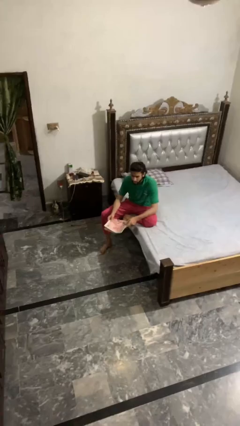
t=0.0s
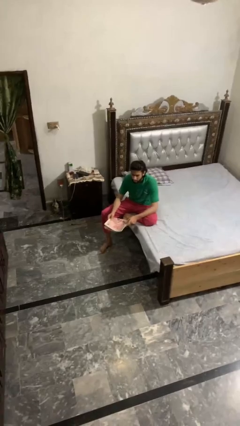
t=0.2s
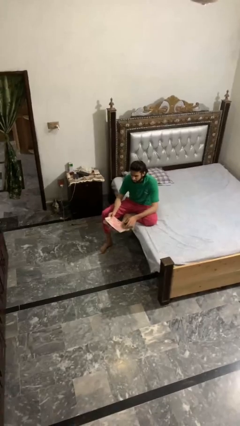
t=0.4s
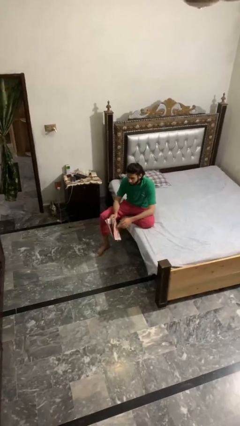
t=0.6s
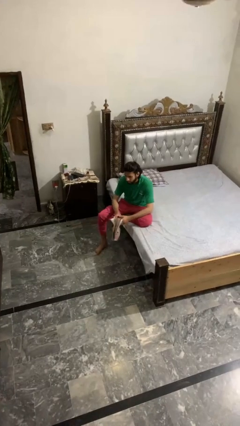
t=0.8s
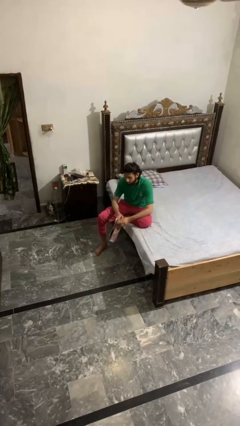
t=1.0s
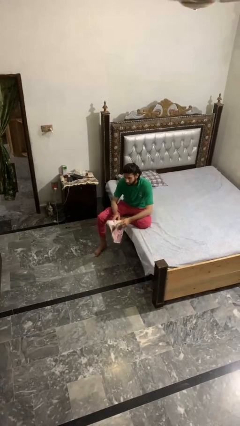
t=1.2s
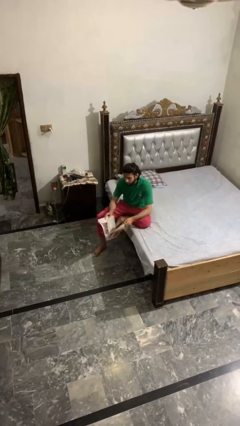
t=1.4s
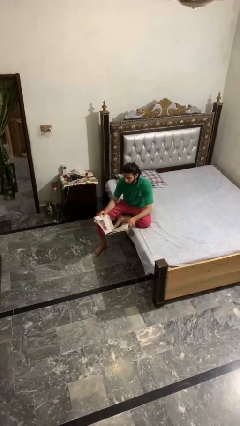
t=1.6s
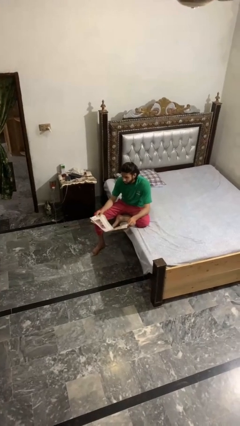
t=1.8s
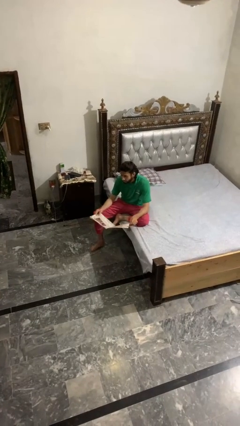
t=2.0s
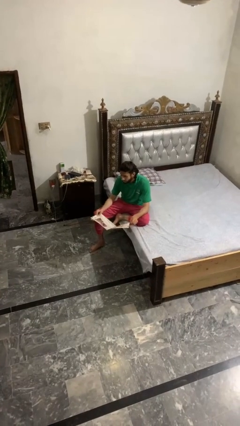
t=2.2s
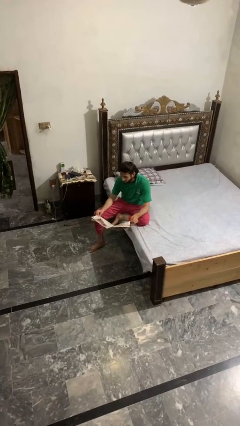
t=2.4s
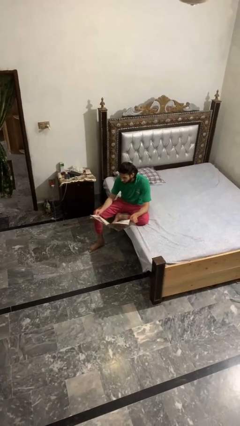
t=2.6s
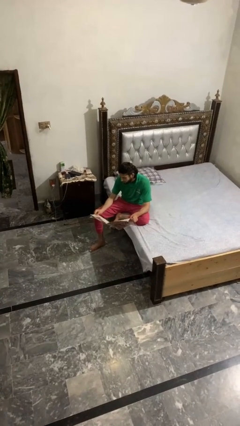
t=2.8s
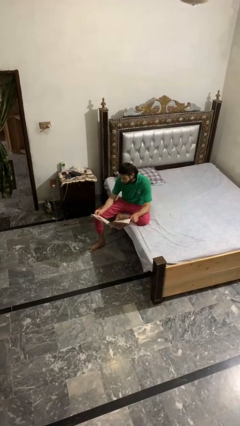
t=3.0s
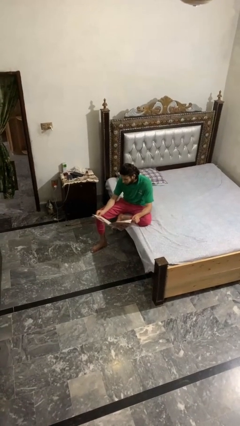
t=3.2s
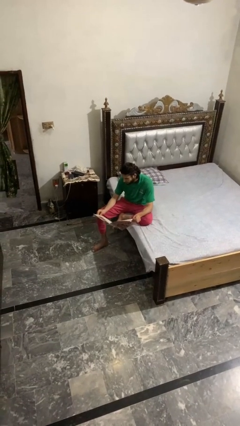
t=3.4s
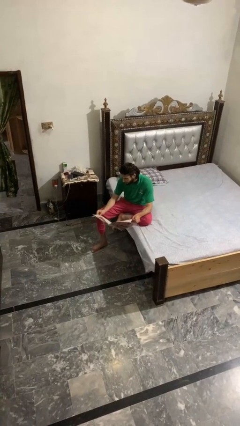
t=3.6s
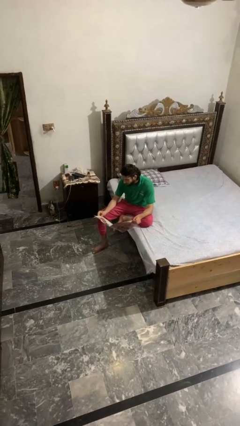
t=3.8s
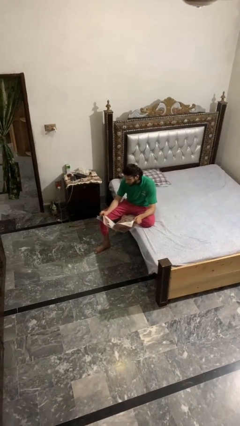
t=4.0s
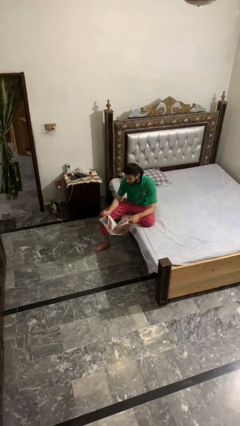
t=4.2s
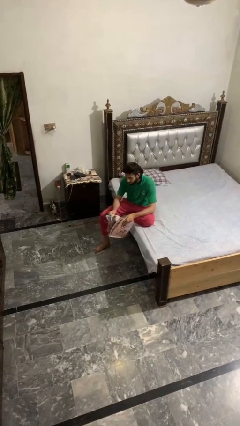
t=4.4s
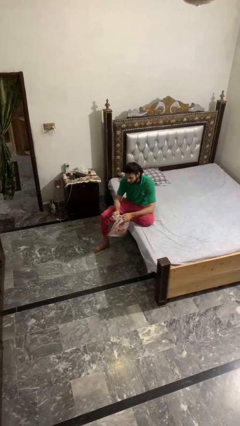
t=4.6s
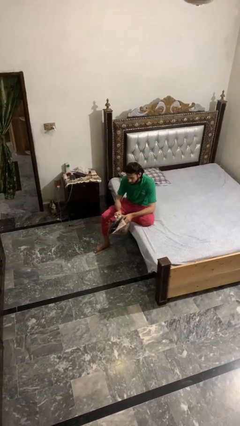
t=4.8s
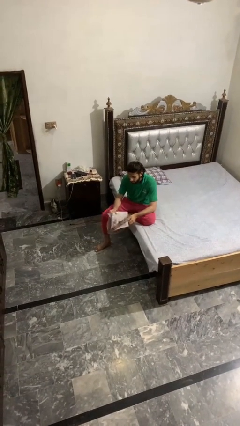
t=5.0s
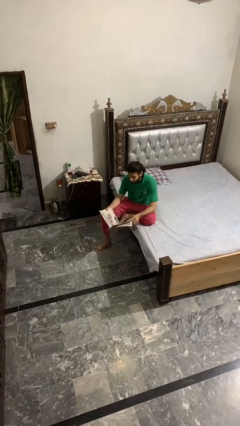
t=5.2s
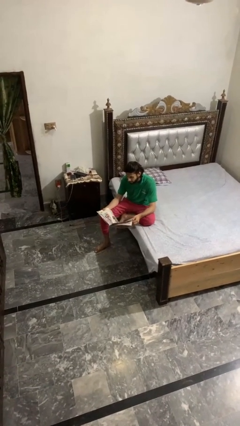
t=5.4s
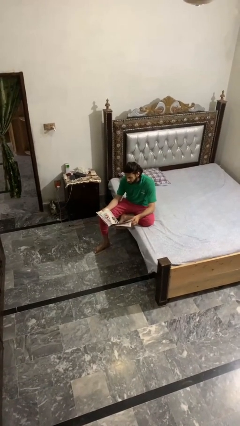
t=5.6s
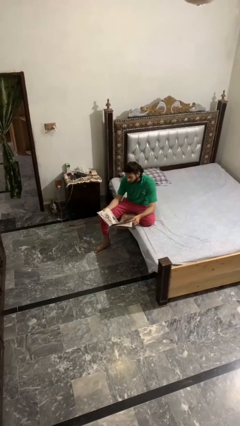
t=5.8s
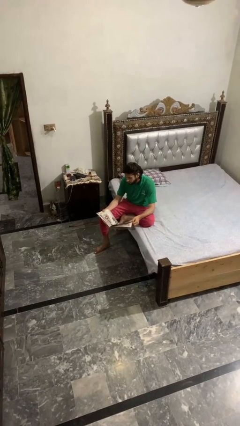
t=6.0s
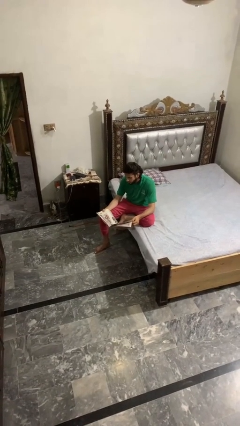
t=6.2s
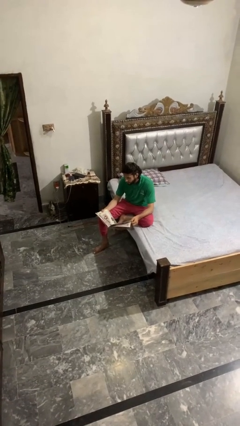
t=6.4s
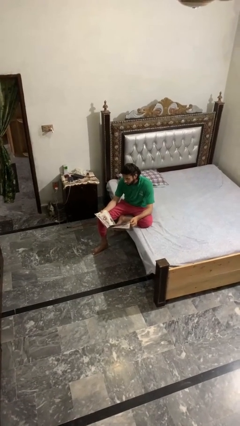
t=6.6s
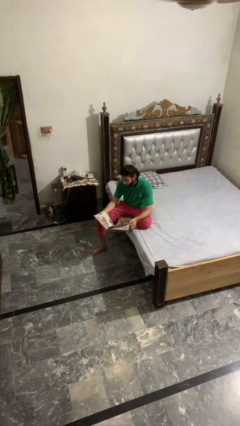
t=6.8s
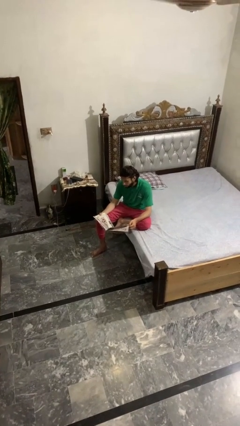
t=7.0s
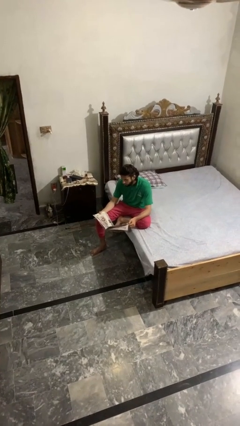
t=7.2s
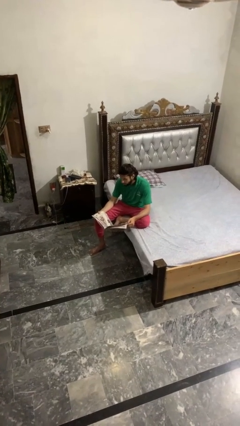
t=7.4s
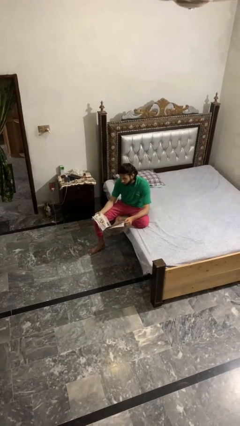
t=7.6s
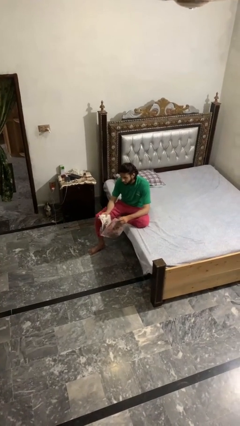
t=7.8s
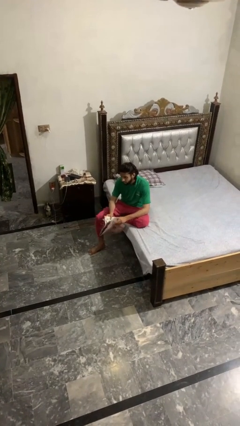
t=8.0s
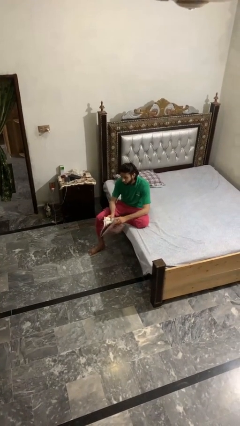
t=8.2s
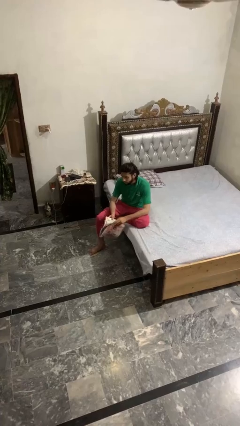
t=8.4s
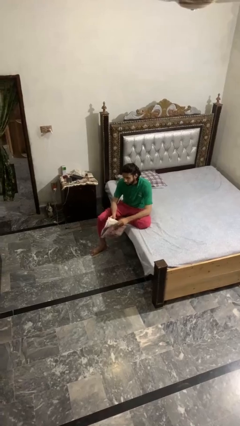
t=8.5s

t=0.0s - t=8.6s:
person reads magazine

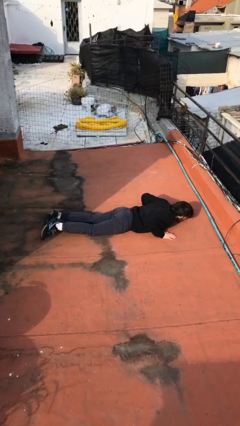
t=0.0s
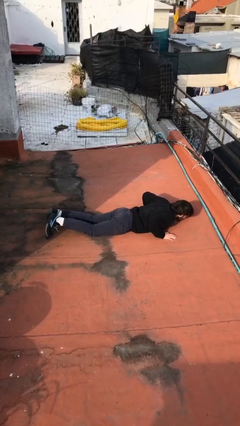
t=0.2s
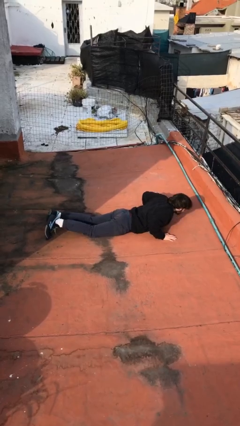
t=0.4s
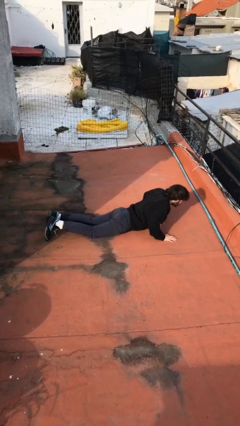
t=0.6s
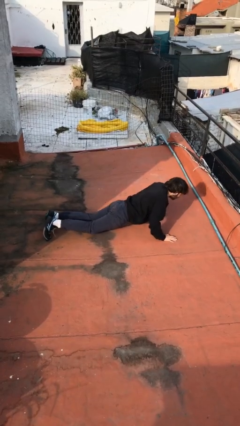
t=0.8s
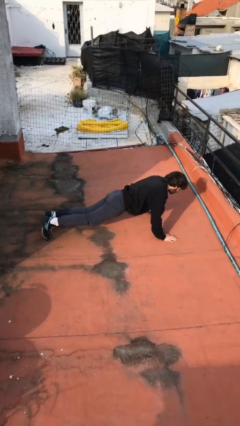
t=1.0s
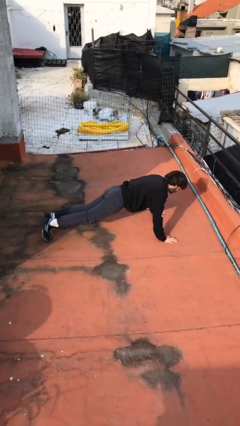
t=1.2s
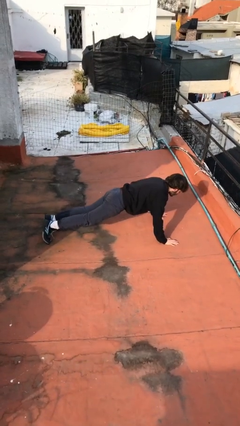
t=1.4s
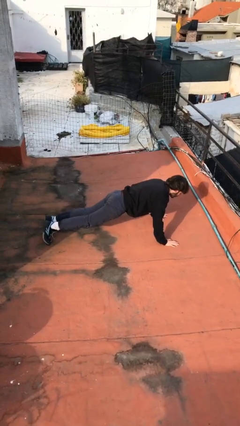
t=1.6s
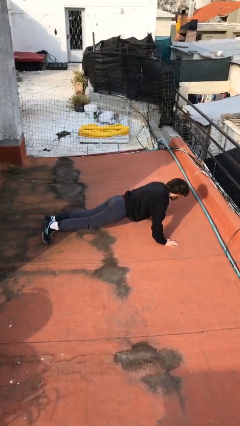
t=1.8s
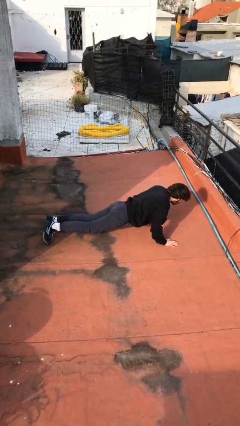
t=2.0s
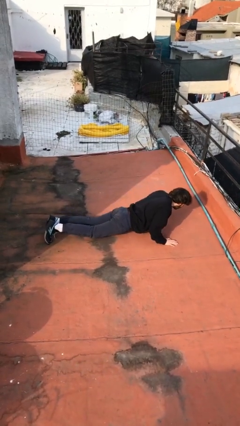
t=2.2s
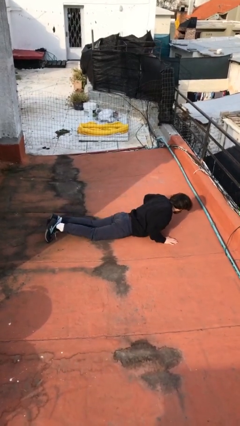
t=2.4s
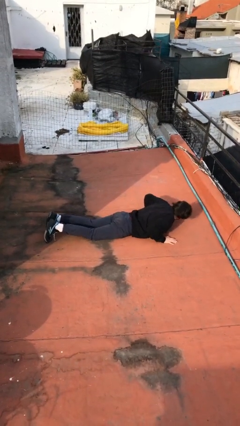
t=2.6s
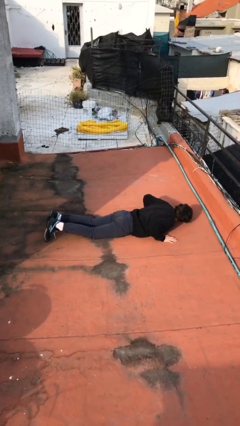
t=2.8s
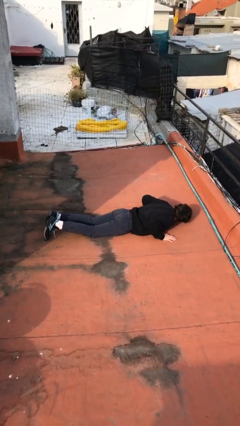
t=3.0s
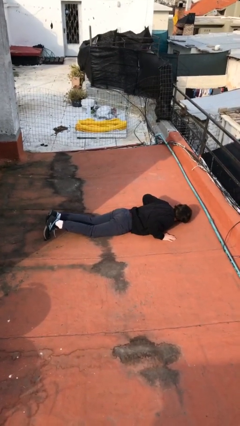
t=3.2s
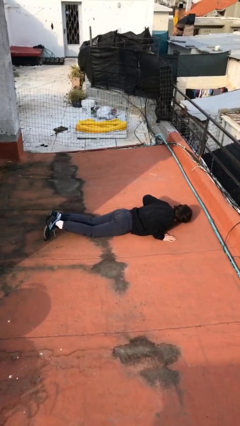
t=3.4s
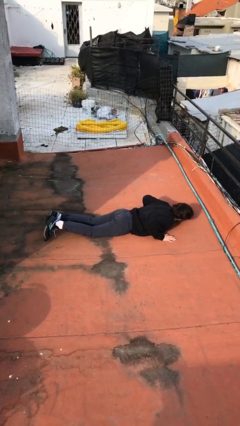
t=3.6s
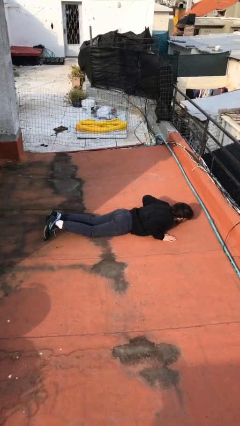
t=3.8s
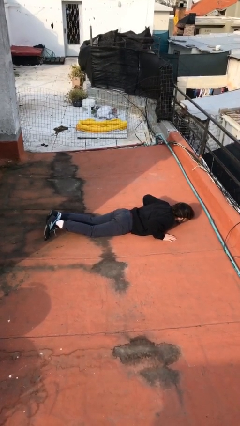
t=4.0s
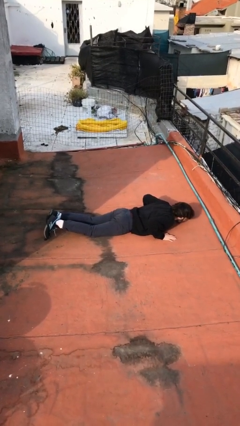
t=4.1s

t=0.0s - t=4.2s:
person exercises with pushup

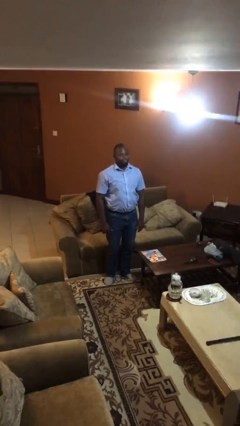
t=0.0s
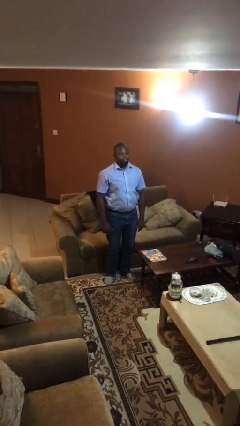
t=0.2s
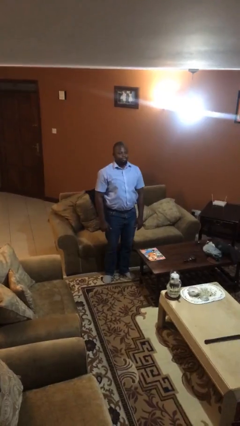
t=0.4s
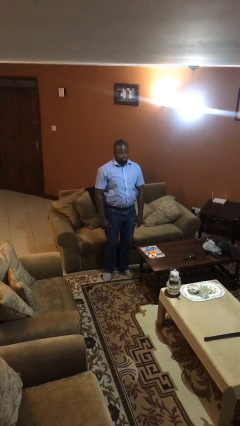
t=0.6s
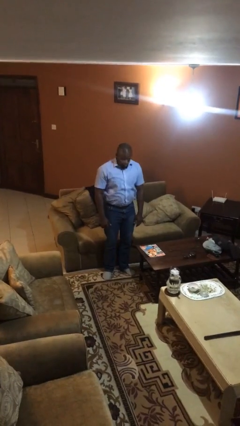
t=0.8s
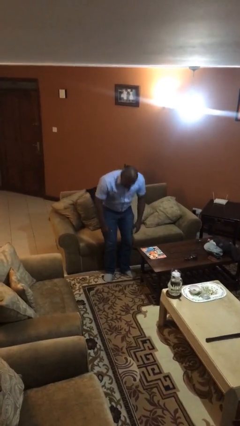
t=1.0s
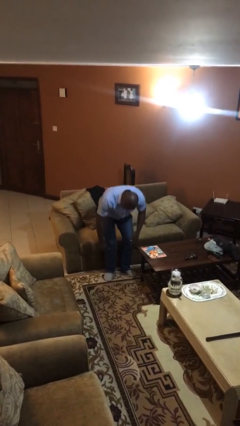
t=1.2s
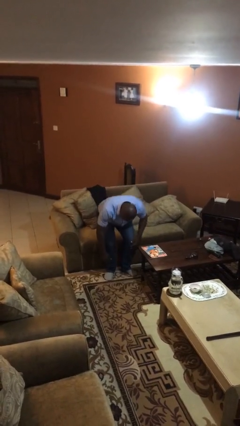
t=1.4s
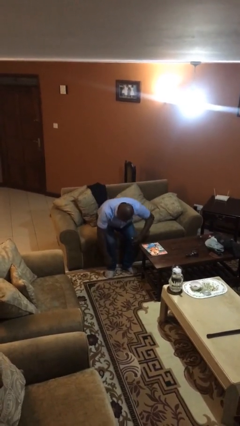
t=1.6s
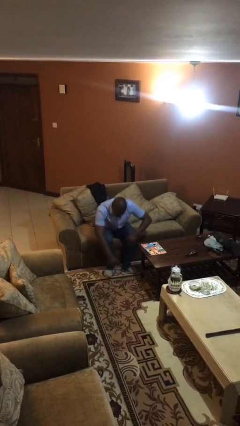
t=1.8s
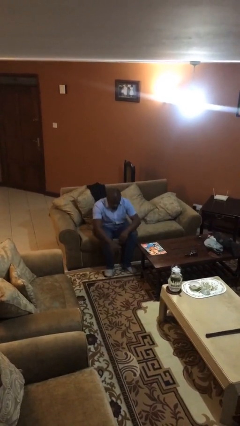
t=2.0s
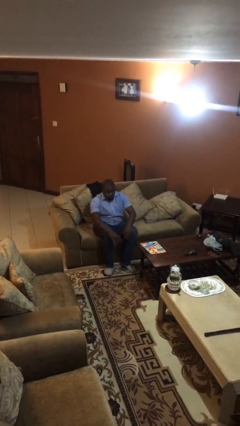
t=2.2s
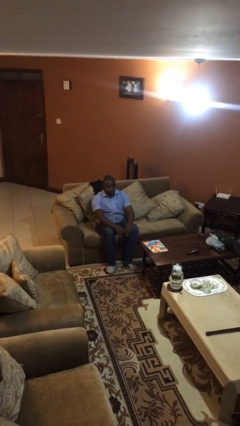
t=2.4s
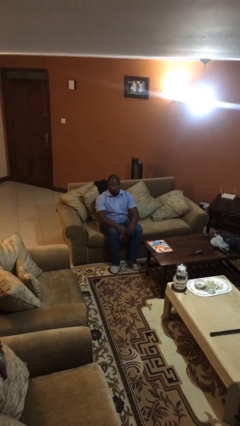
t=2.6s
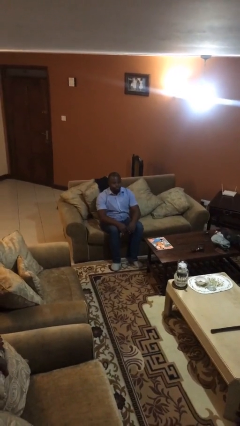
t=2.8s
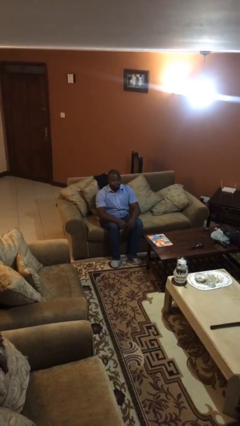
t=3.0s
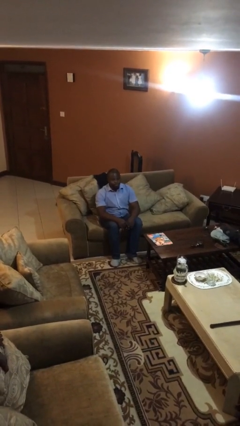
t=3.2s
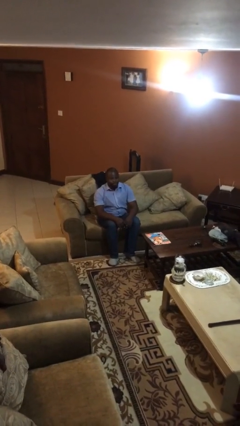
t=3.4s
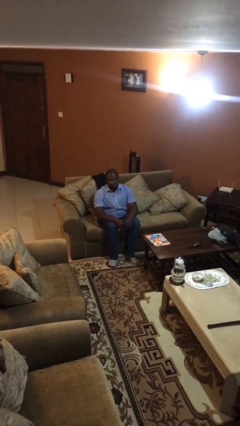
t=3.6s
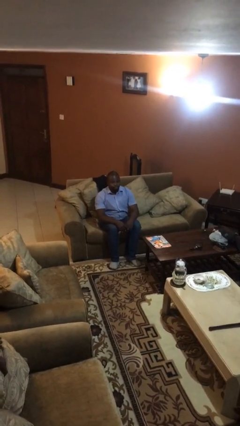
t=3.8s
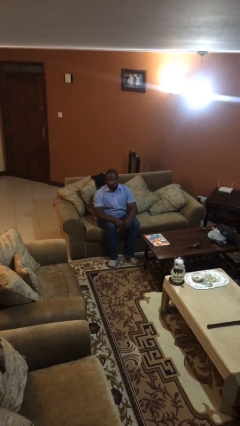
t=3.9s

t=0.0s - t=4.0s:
person sits down

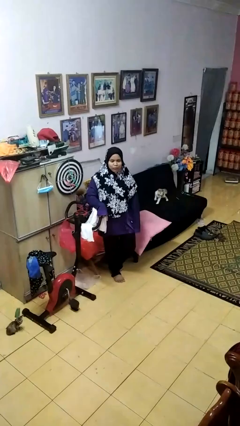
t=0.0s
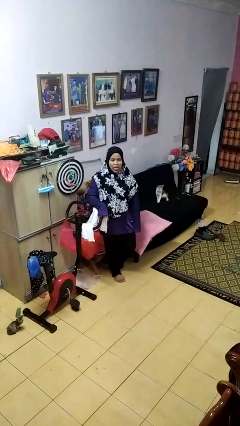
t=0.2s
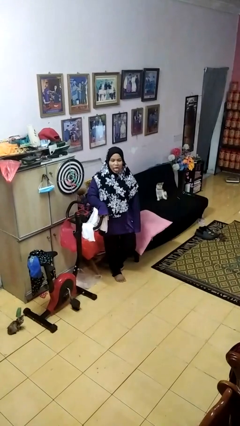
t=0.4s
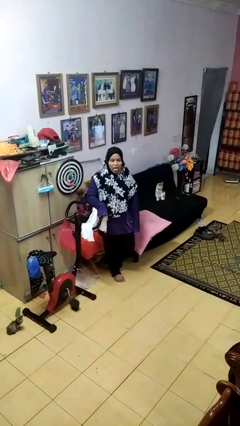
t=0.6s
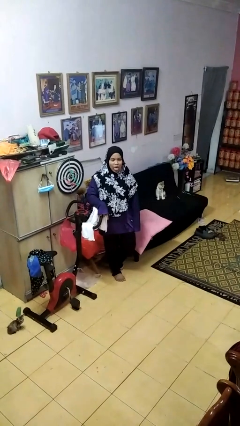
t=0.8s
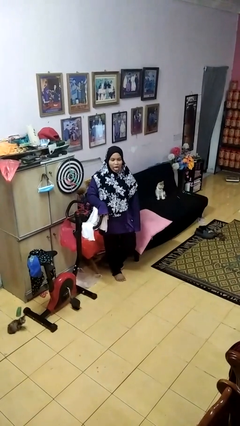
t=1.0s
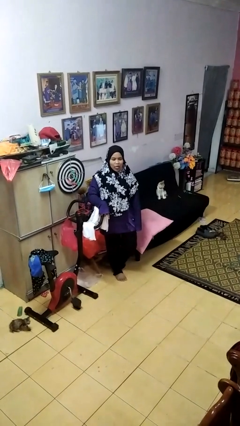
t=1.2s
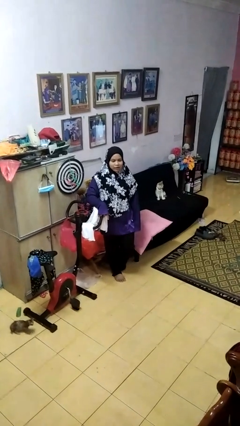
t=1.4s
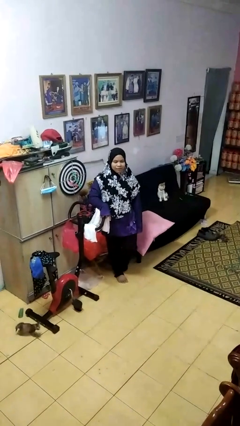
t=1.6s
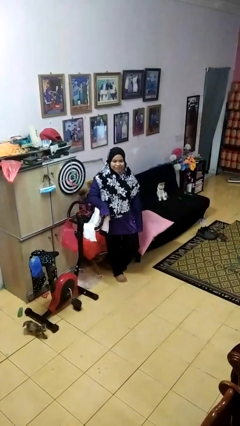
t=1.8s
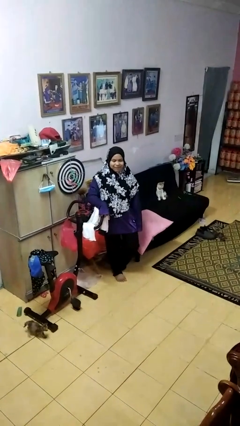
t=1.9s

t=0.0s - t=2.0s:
person sticks out tongue
